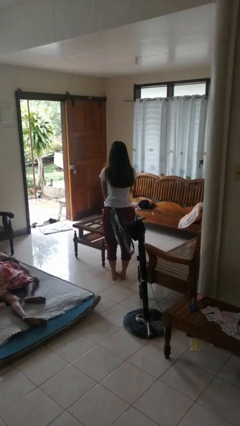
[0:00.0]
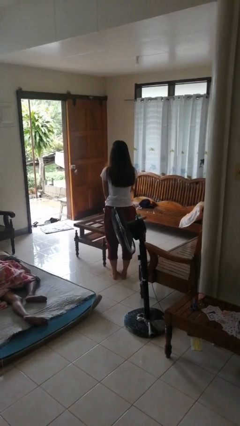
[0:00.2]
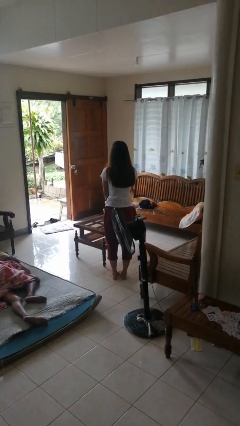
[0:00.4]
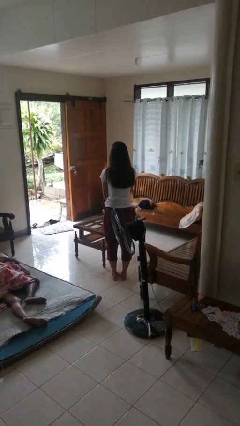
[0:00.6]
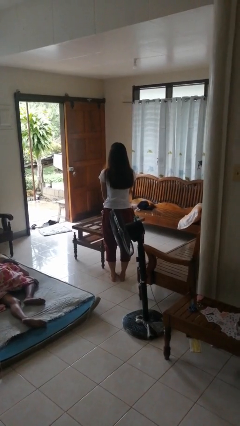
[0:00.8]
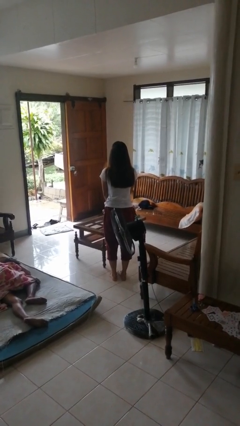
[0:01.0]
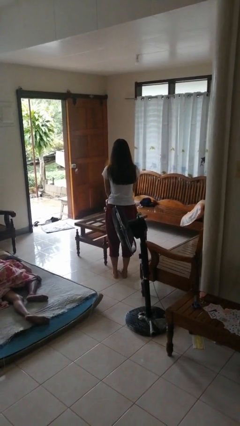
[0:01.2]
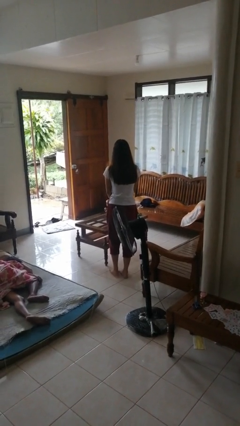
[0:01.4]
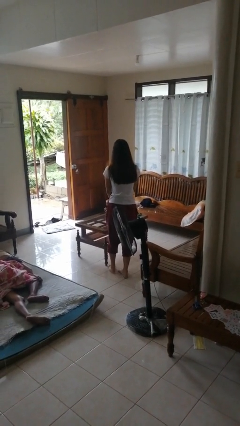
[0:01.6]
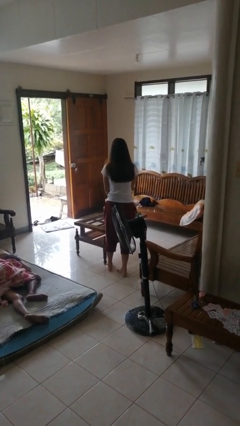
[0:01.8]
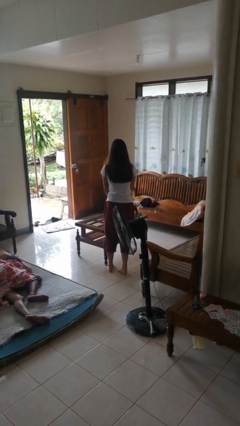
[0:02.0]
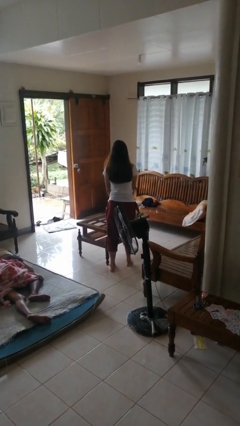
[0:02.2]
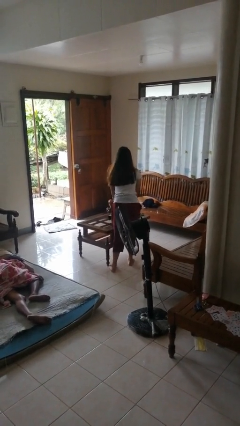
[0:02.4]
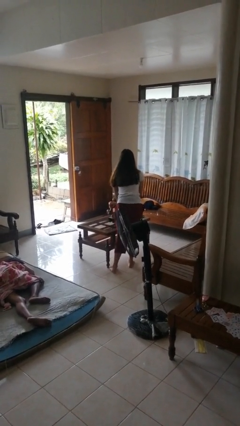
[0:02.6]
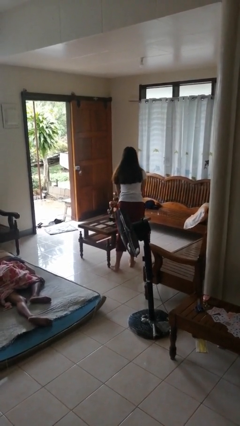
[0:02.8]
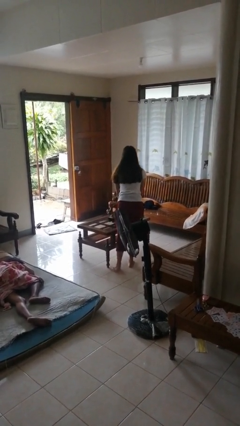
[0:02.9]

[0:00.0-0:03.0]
person bumps into table

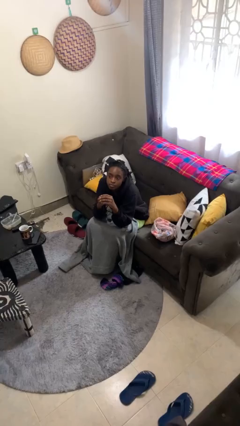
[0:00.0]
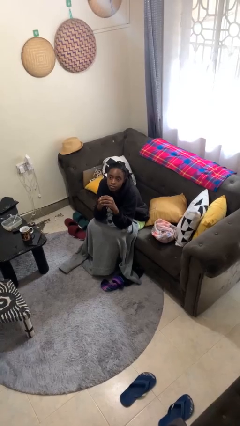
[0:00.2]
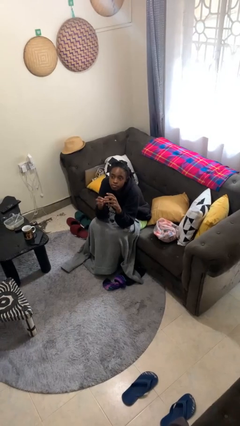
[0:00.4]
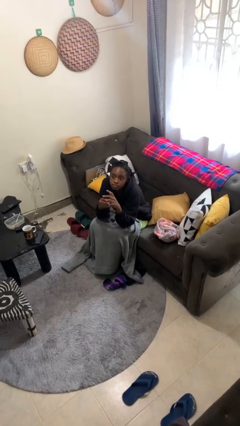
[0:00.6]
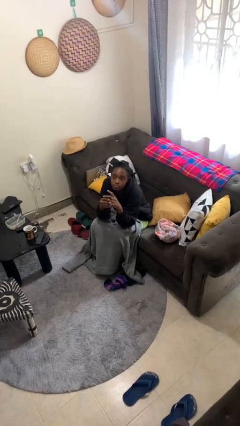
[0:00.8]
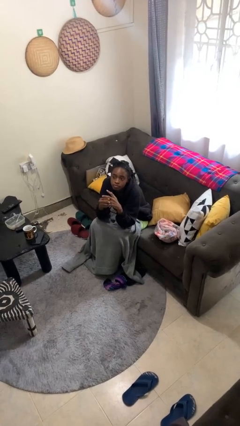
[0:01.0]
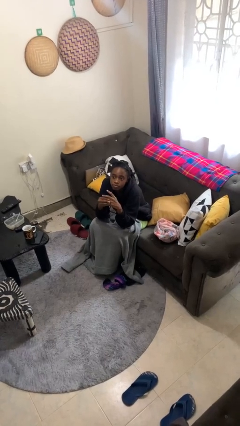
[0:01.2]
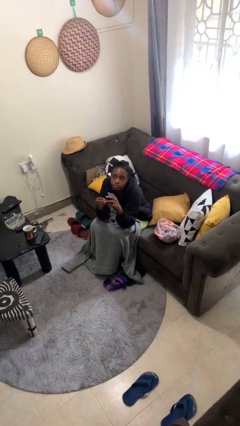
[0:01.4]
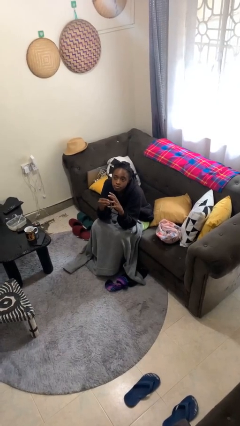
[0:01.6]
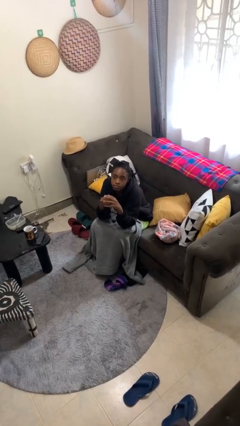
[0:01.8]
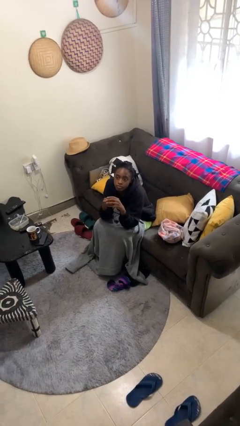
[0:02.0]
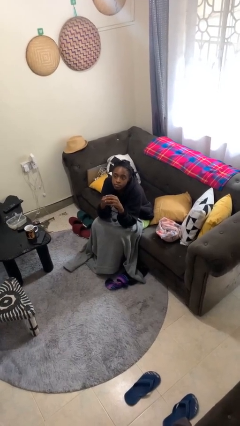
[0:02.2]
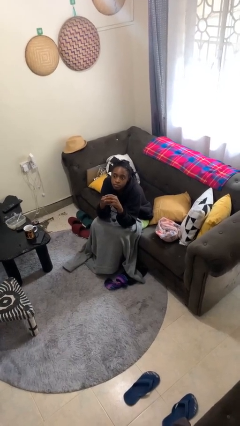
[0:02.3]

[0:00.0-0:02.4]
person takes off ring

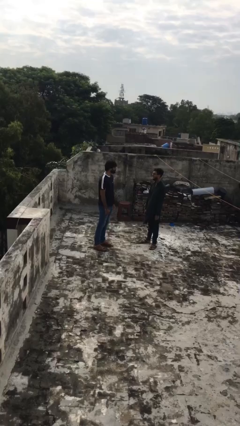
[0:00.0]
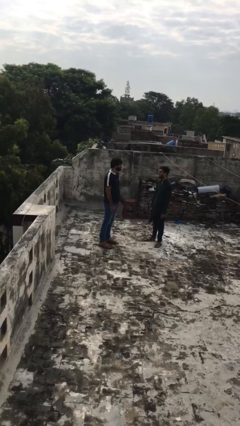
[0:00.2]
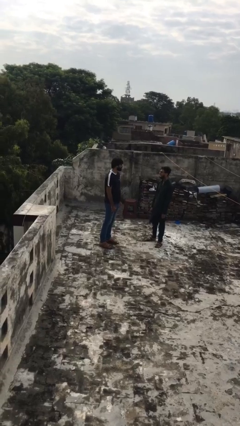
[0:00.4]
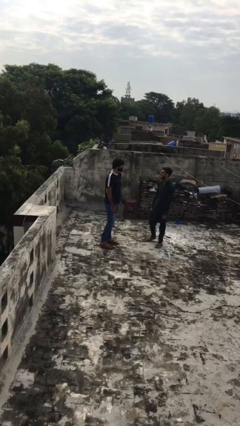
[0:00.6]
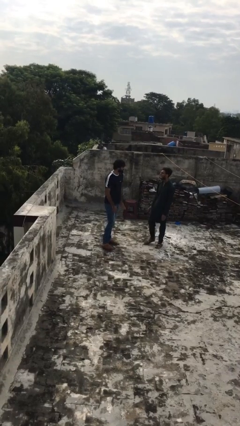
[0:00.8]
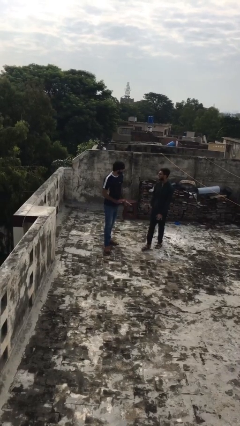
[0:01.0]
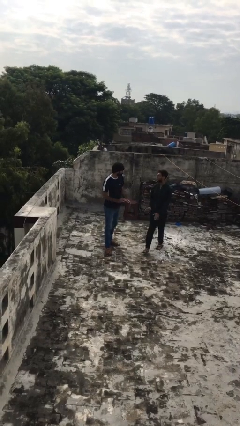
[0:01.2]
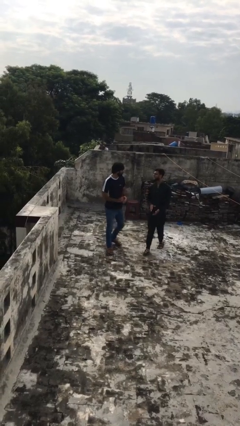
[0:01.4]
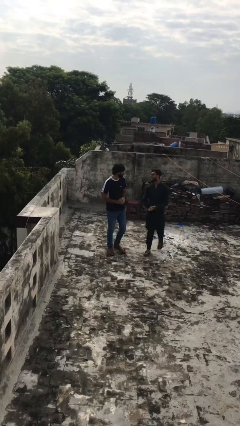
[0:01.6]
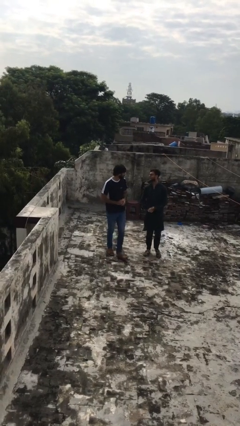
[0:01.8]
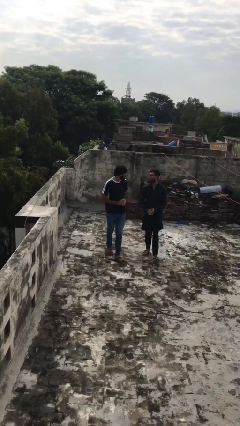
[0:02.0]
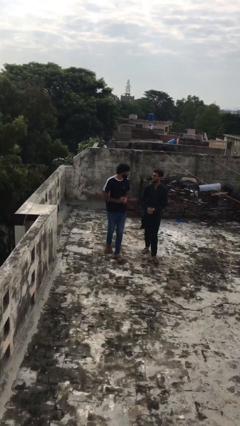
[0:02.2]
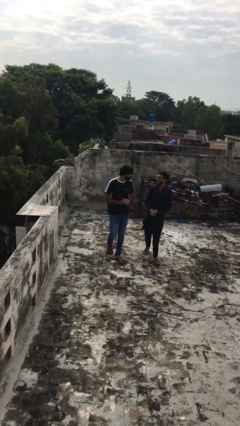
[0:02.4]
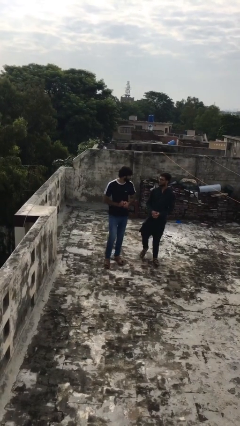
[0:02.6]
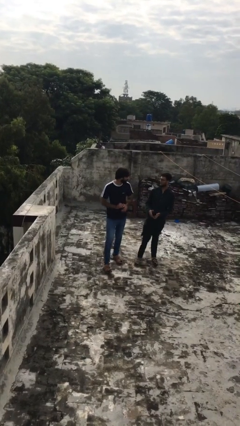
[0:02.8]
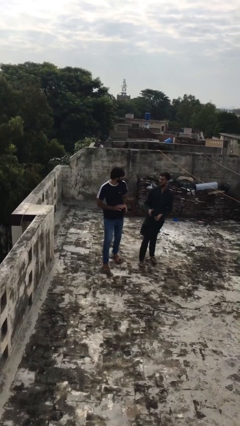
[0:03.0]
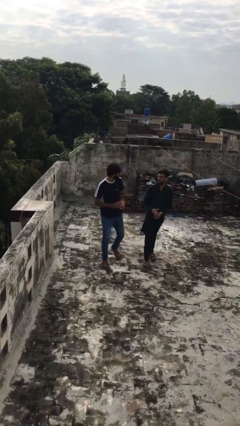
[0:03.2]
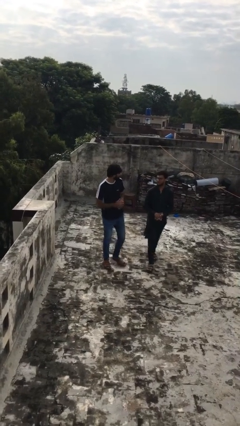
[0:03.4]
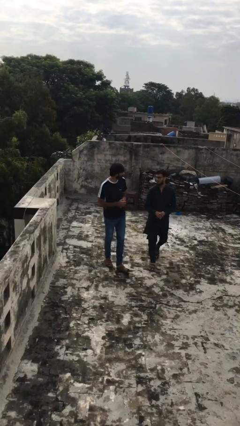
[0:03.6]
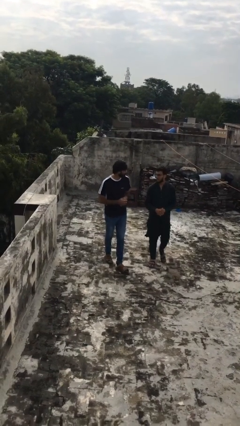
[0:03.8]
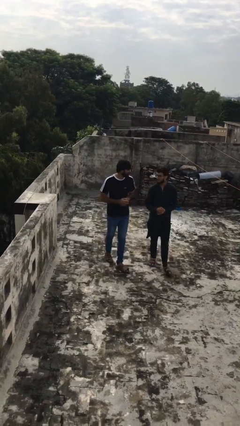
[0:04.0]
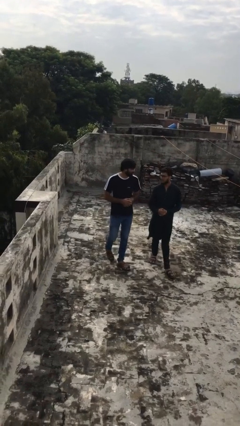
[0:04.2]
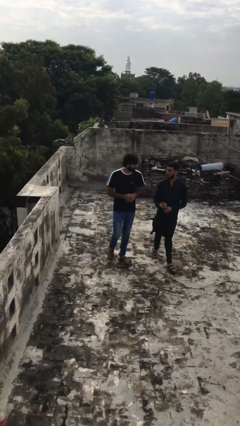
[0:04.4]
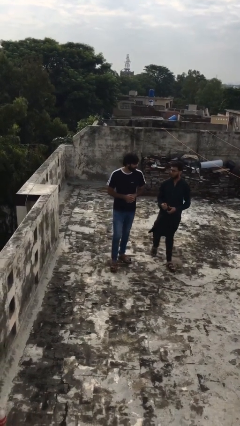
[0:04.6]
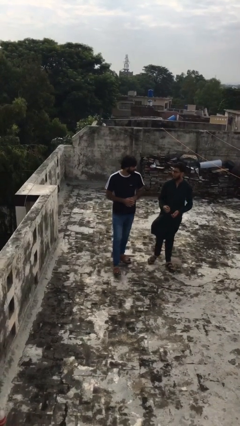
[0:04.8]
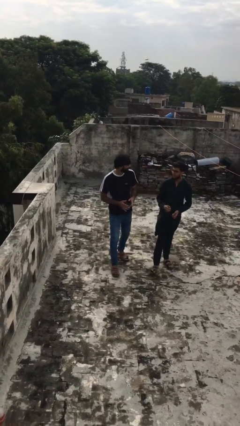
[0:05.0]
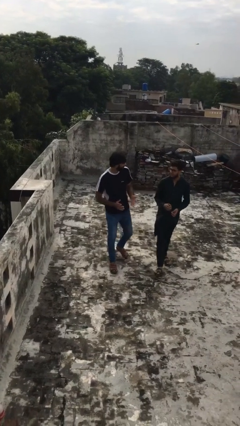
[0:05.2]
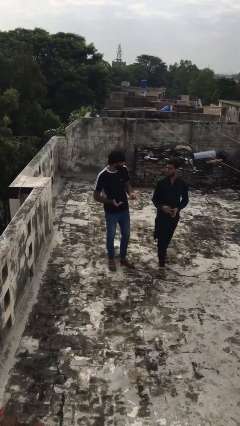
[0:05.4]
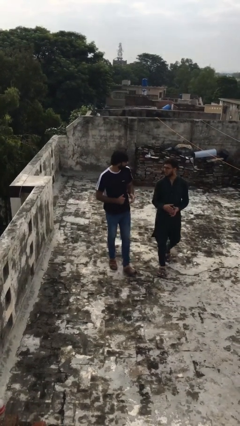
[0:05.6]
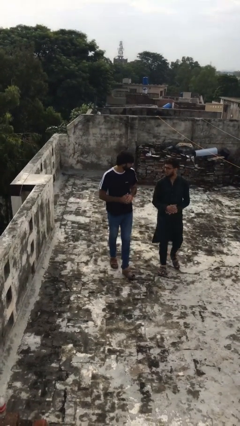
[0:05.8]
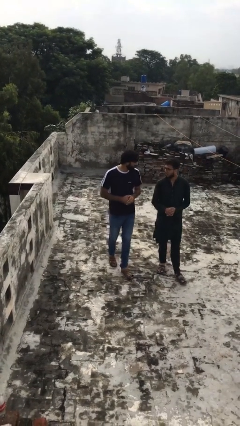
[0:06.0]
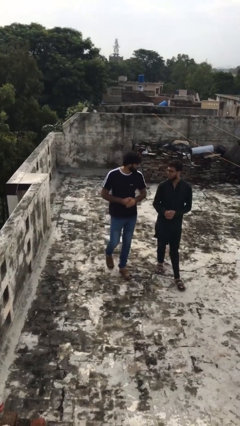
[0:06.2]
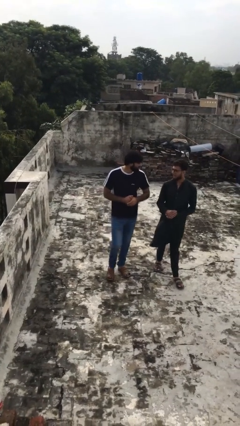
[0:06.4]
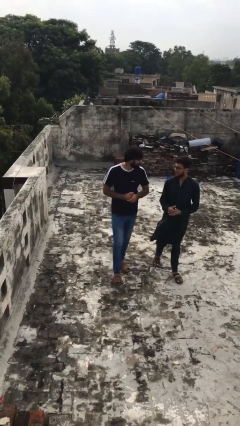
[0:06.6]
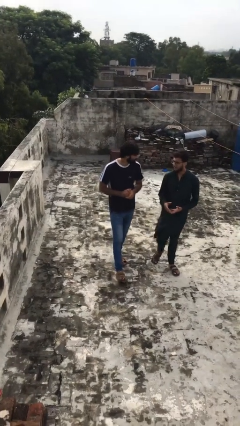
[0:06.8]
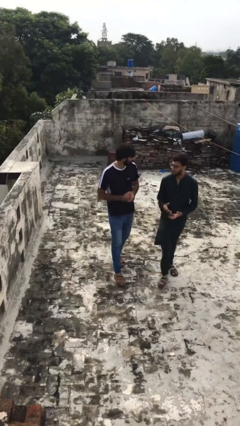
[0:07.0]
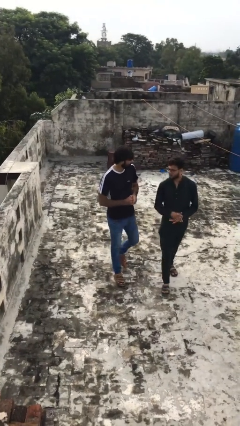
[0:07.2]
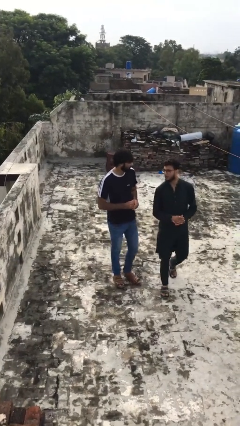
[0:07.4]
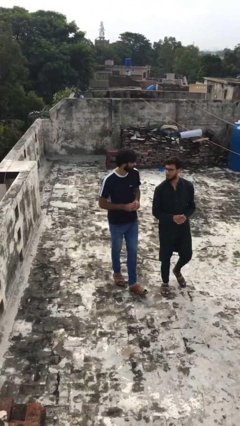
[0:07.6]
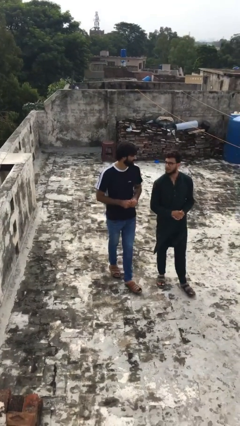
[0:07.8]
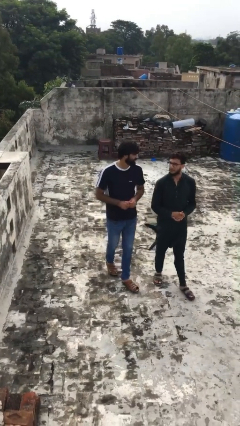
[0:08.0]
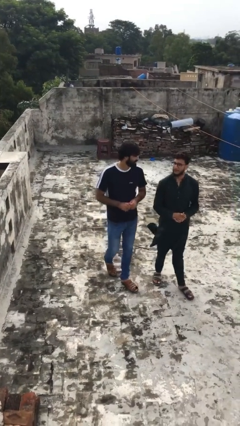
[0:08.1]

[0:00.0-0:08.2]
person talks to person

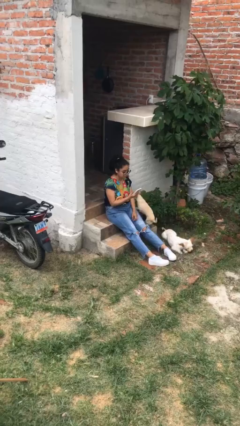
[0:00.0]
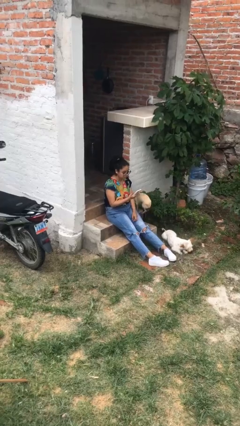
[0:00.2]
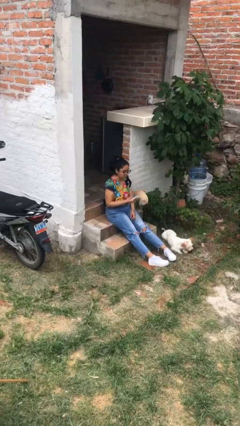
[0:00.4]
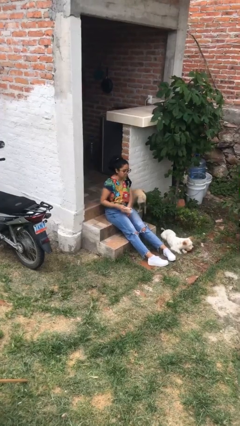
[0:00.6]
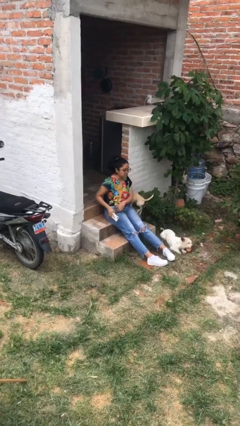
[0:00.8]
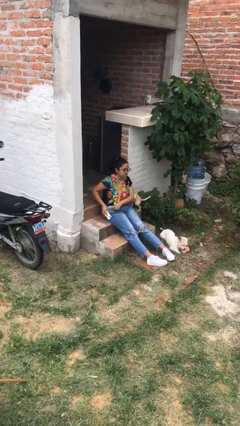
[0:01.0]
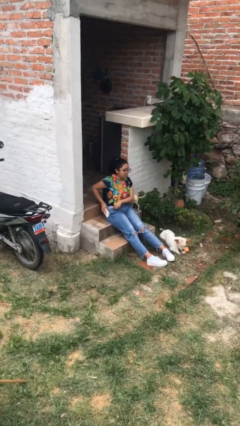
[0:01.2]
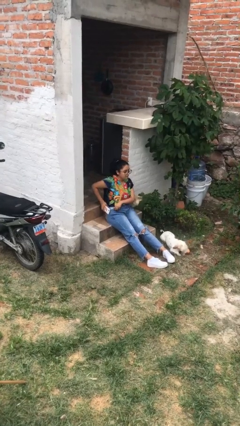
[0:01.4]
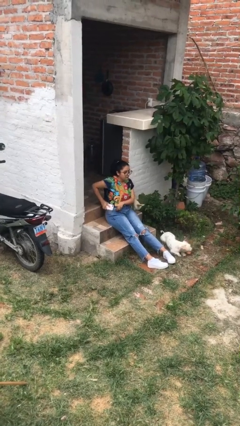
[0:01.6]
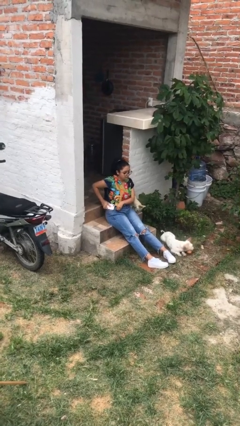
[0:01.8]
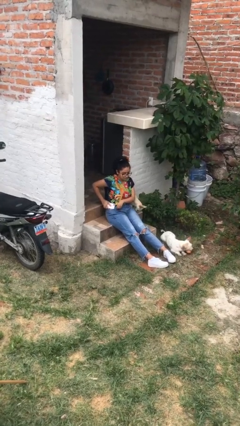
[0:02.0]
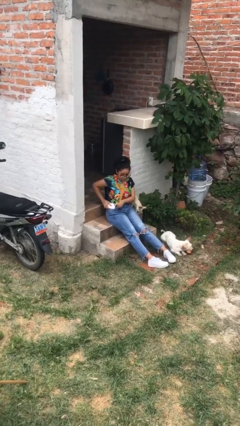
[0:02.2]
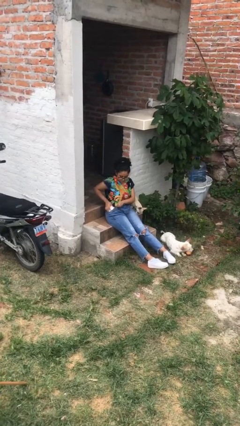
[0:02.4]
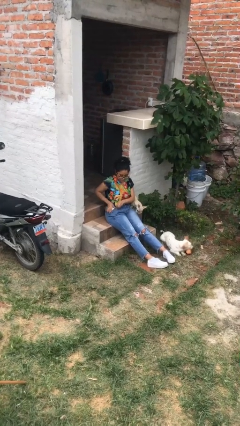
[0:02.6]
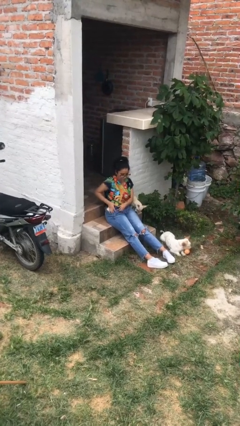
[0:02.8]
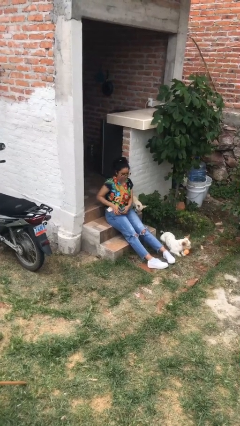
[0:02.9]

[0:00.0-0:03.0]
person puts phone into pocket

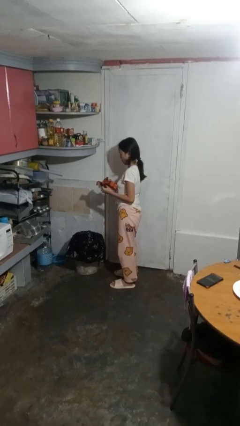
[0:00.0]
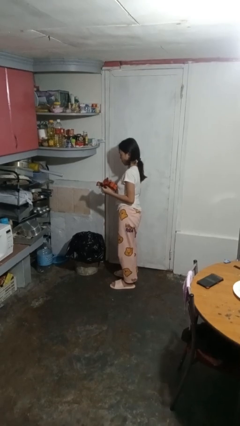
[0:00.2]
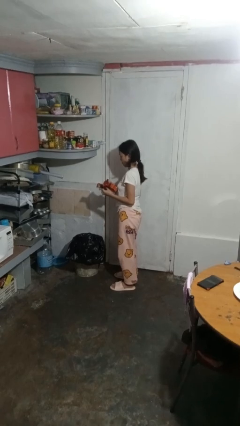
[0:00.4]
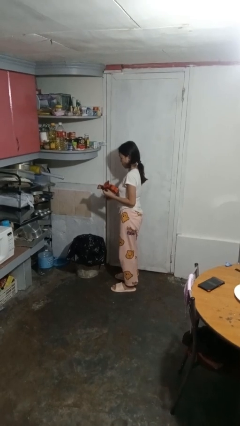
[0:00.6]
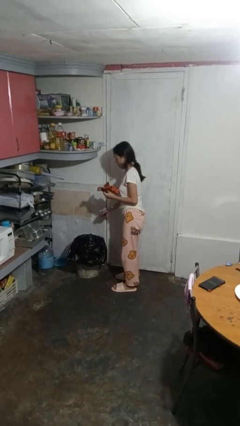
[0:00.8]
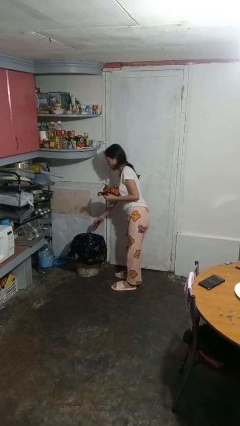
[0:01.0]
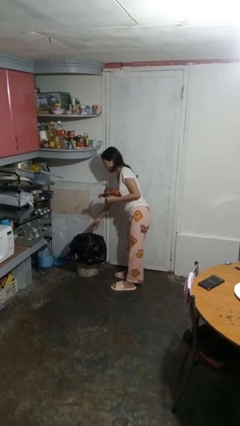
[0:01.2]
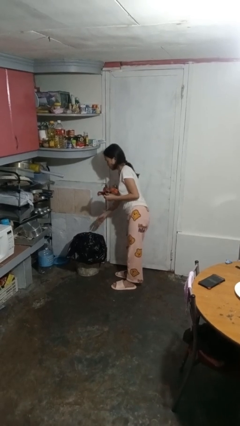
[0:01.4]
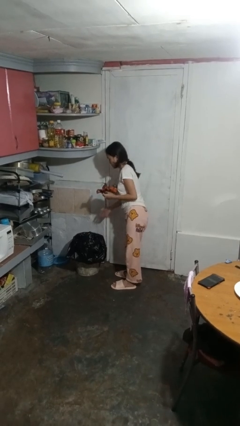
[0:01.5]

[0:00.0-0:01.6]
person discards trash
